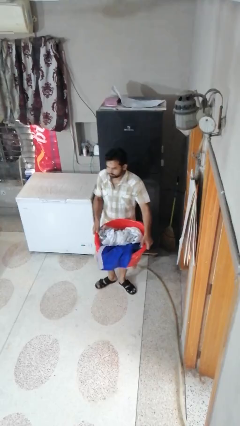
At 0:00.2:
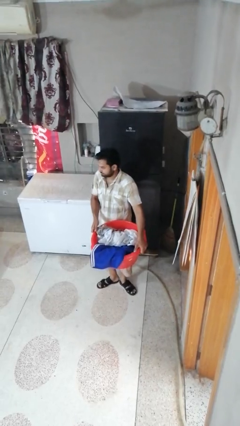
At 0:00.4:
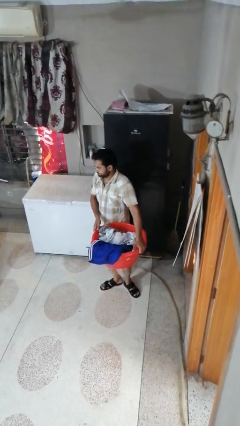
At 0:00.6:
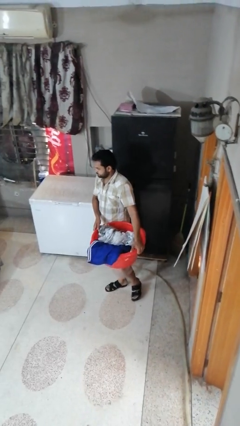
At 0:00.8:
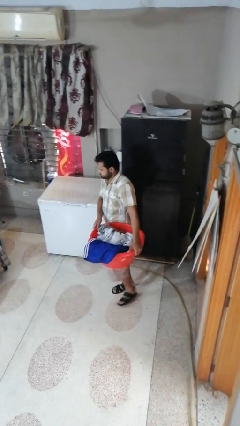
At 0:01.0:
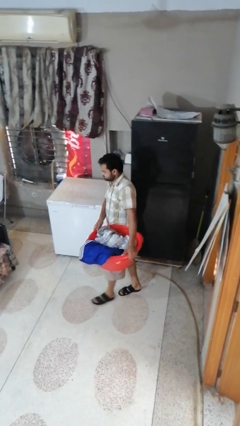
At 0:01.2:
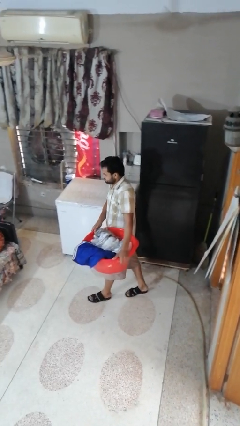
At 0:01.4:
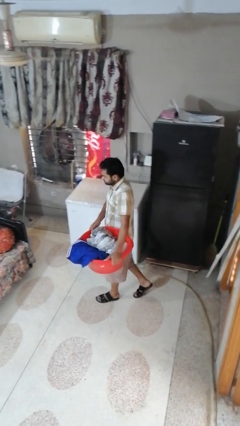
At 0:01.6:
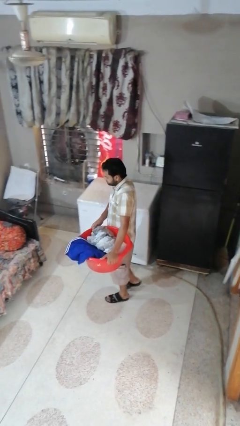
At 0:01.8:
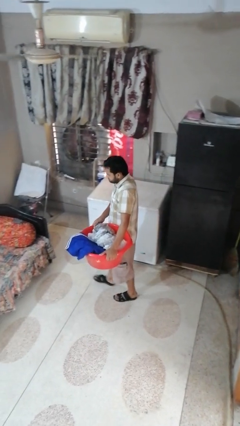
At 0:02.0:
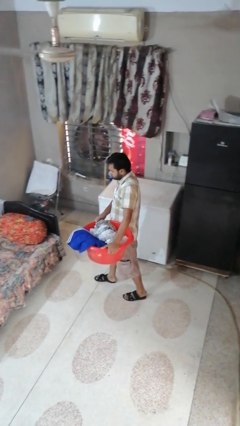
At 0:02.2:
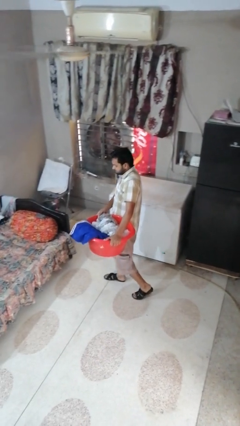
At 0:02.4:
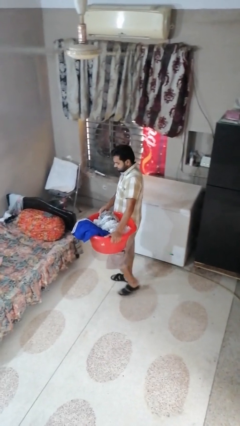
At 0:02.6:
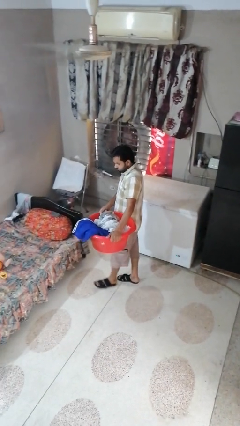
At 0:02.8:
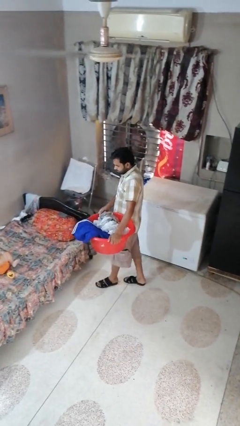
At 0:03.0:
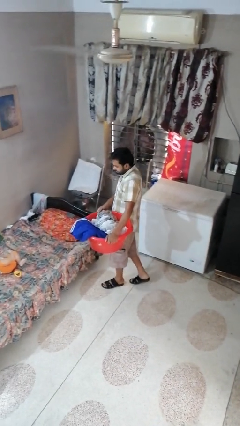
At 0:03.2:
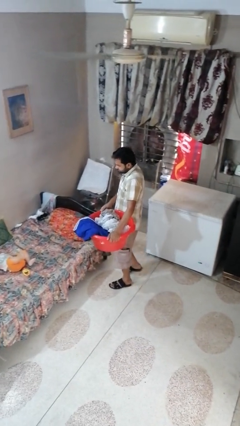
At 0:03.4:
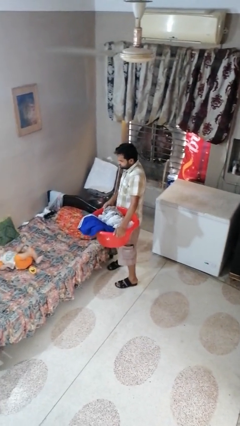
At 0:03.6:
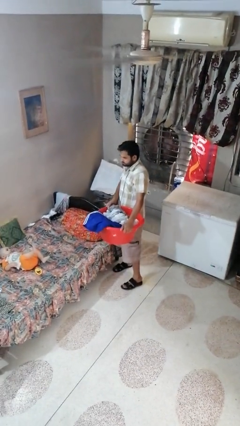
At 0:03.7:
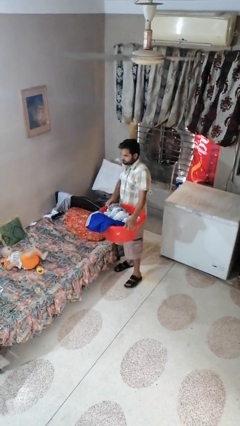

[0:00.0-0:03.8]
person carries laundry basket

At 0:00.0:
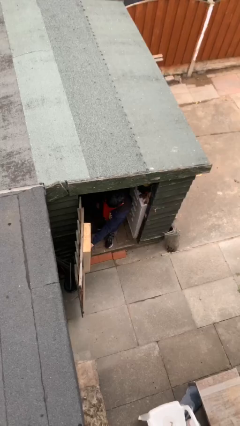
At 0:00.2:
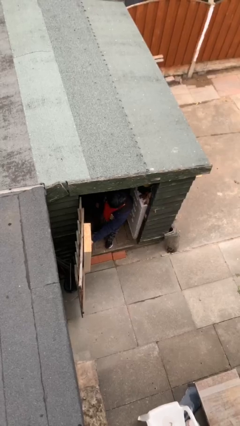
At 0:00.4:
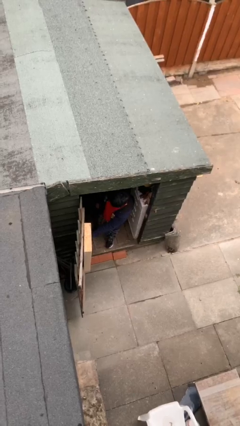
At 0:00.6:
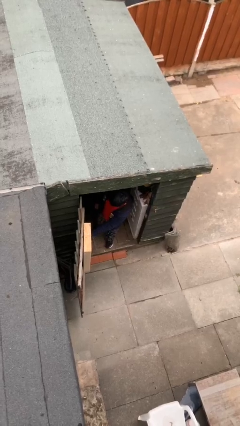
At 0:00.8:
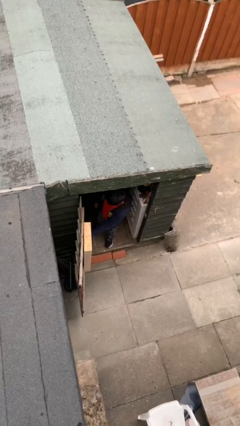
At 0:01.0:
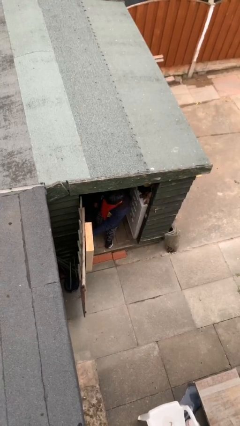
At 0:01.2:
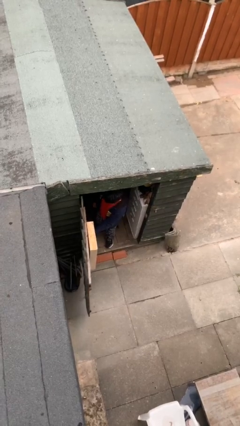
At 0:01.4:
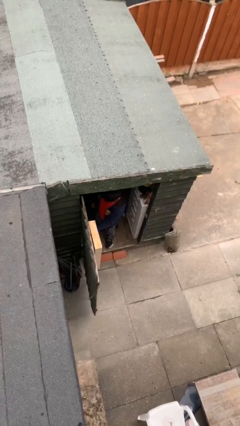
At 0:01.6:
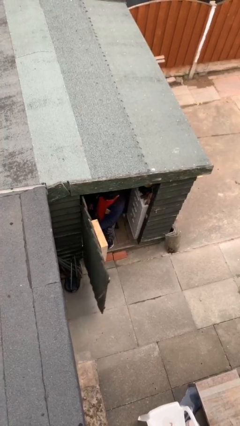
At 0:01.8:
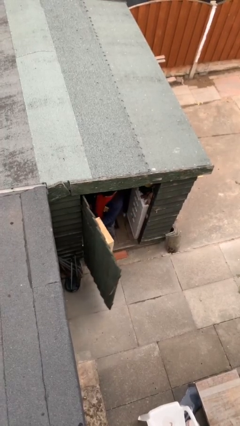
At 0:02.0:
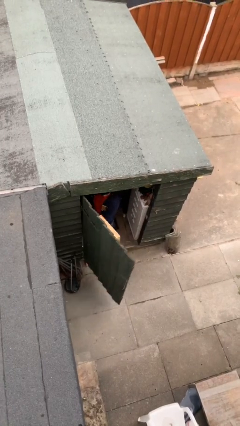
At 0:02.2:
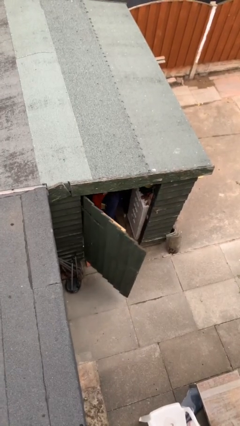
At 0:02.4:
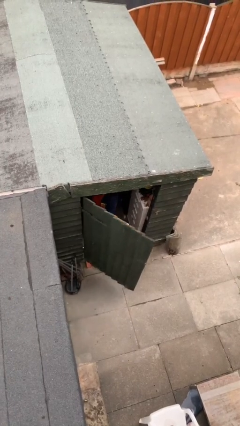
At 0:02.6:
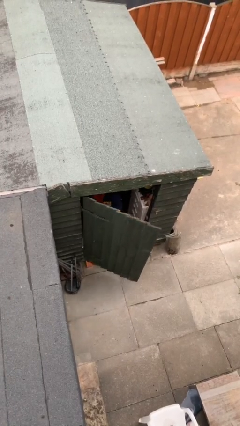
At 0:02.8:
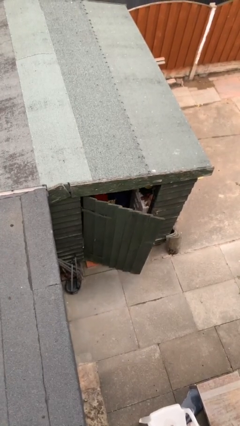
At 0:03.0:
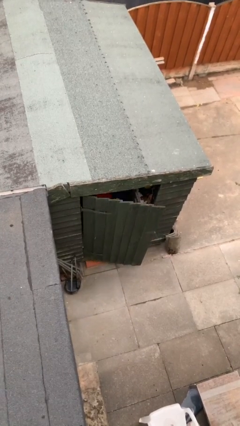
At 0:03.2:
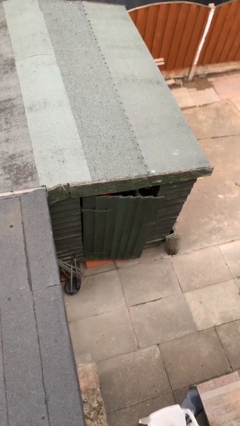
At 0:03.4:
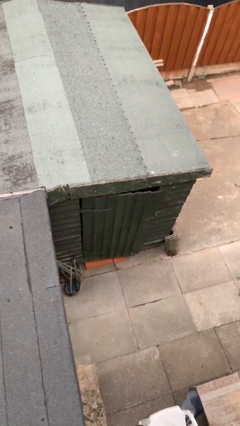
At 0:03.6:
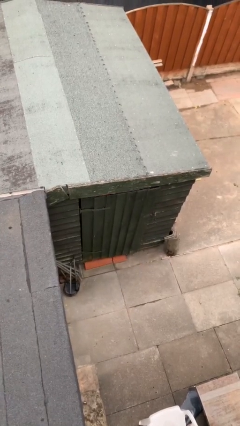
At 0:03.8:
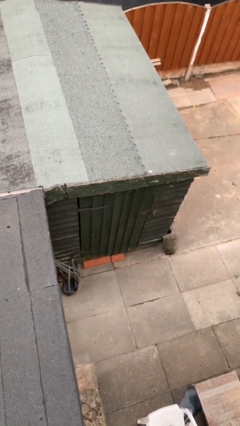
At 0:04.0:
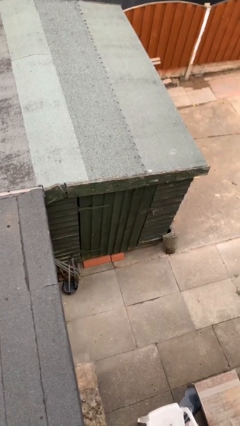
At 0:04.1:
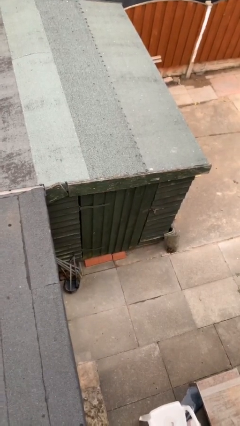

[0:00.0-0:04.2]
person closes facility door

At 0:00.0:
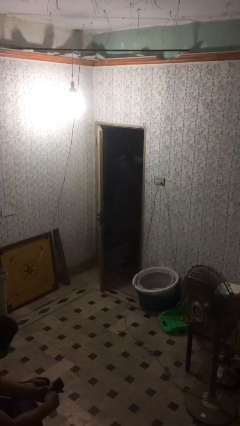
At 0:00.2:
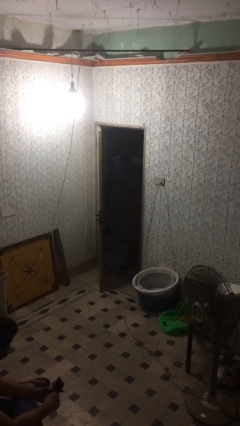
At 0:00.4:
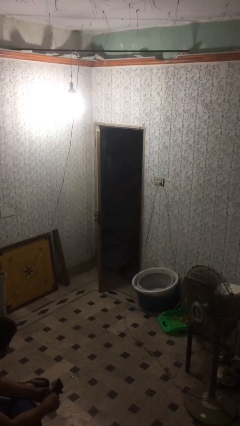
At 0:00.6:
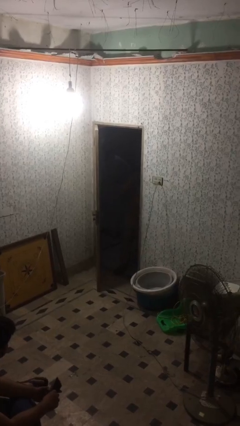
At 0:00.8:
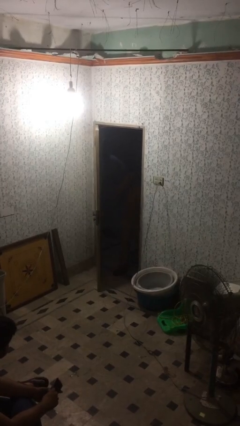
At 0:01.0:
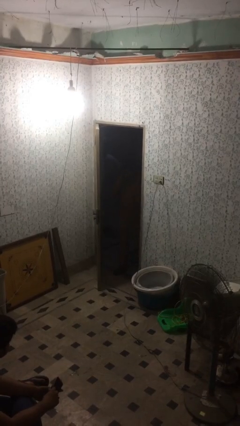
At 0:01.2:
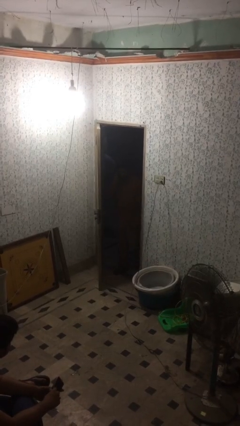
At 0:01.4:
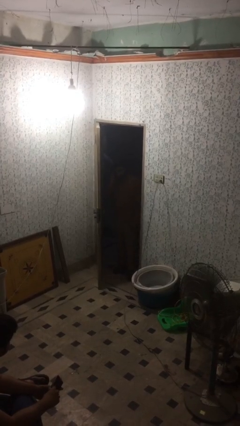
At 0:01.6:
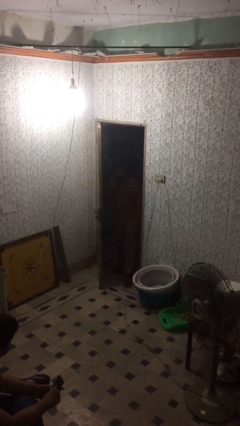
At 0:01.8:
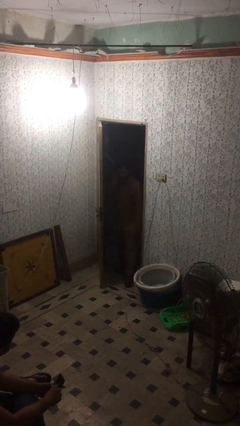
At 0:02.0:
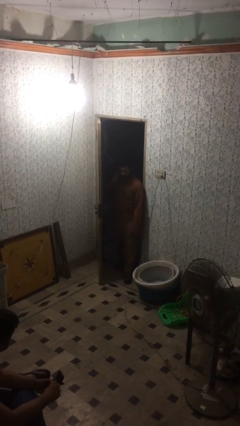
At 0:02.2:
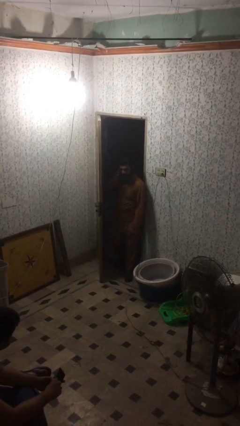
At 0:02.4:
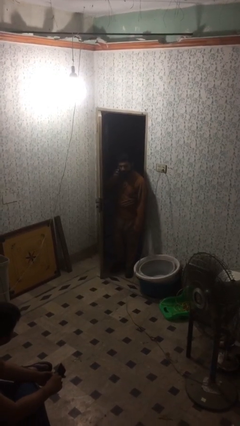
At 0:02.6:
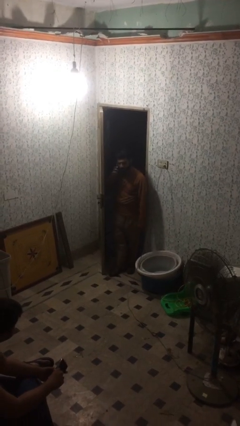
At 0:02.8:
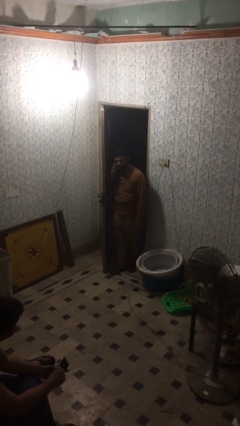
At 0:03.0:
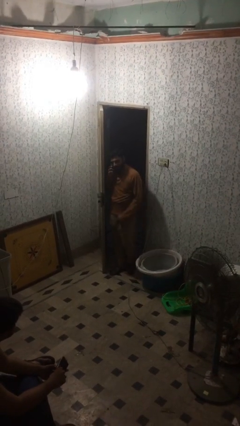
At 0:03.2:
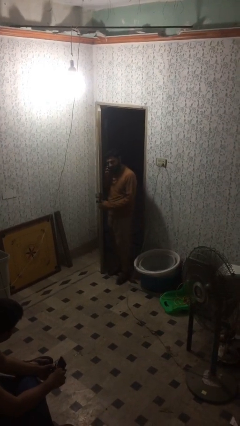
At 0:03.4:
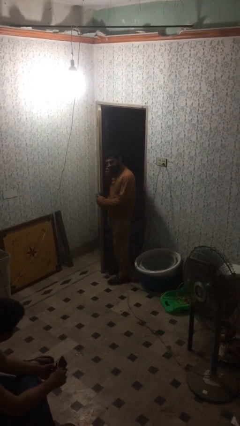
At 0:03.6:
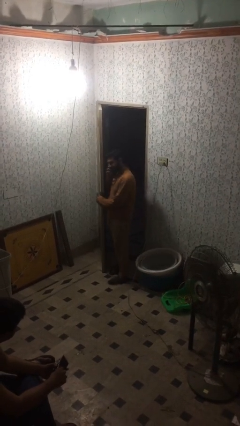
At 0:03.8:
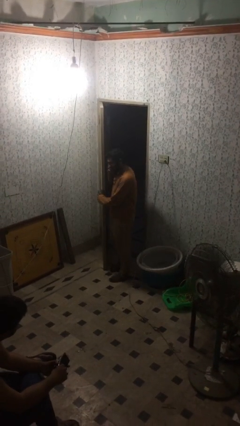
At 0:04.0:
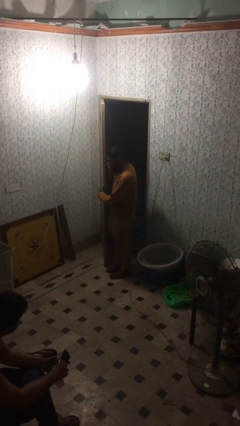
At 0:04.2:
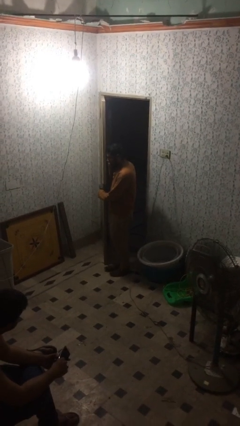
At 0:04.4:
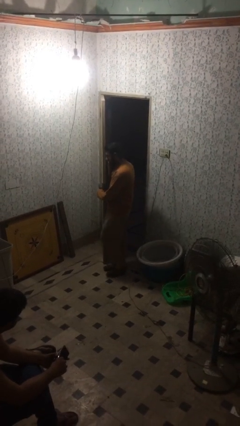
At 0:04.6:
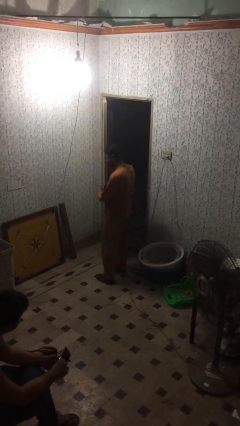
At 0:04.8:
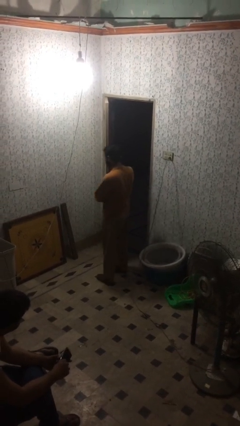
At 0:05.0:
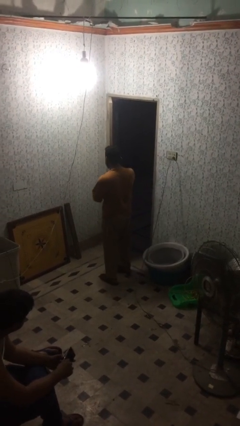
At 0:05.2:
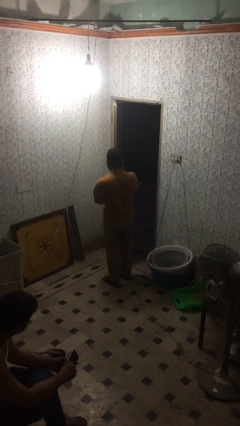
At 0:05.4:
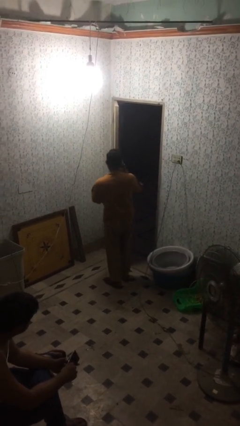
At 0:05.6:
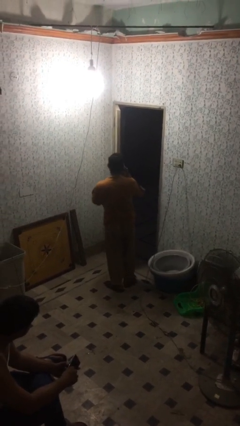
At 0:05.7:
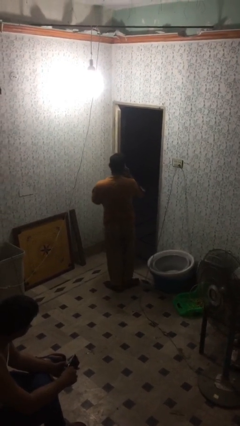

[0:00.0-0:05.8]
person enters scene through structure

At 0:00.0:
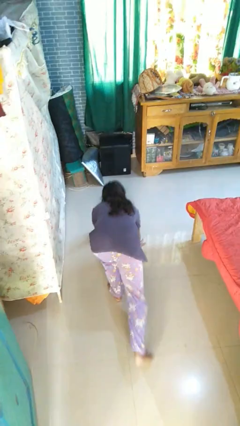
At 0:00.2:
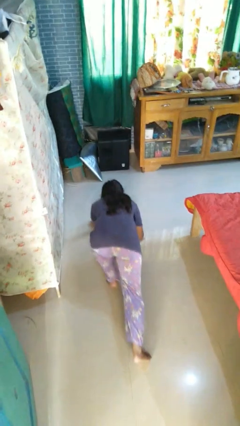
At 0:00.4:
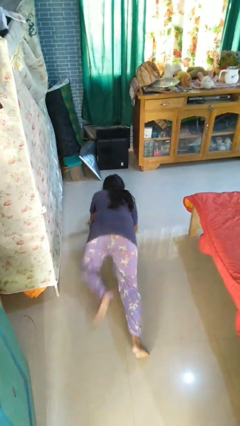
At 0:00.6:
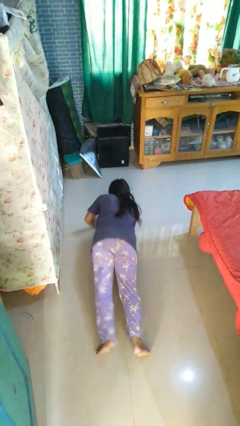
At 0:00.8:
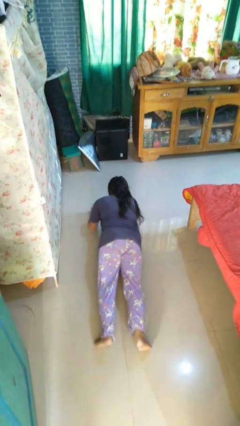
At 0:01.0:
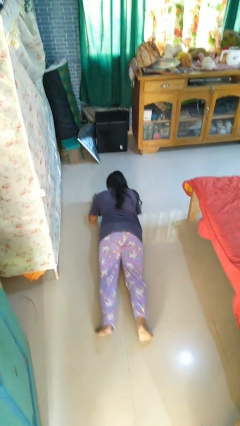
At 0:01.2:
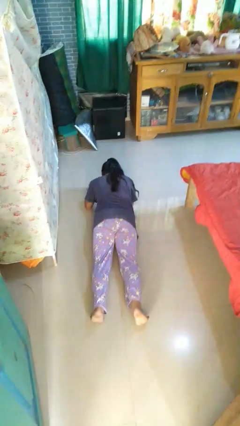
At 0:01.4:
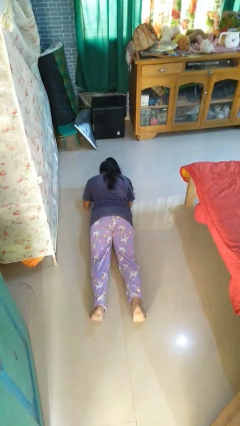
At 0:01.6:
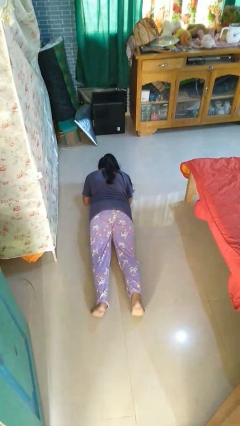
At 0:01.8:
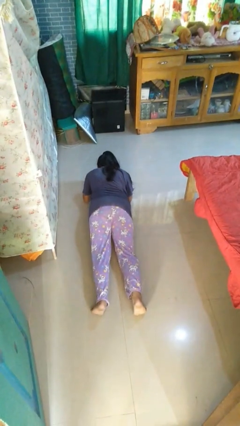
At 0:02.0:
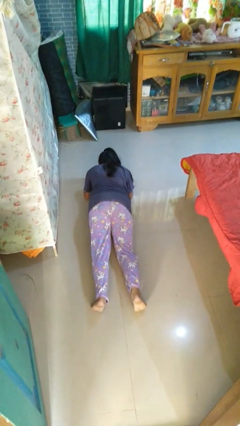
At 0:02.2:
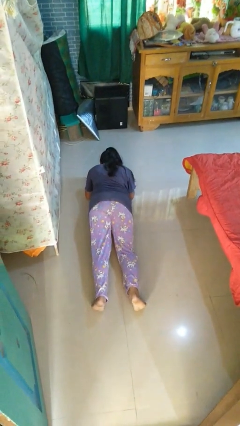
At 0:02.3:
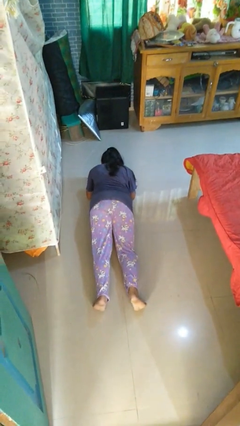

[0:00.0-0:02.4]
person exercises with plank

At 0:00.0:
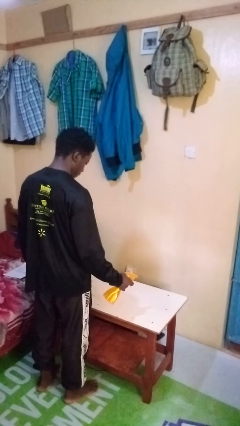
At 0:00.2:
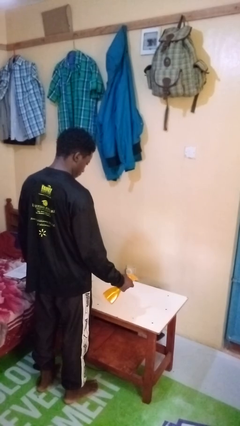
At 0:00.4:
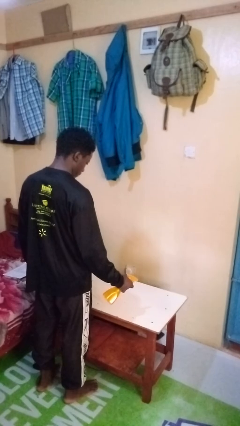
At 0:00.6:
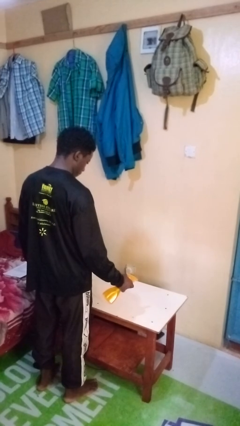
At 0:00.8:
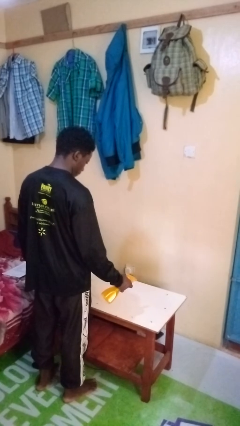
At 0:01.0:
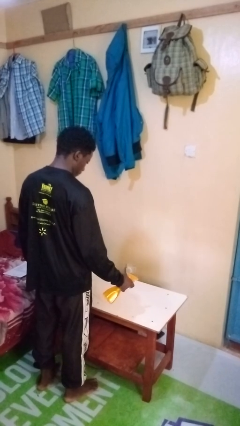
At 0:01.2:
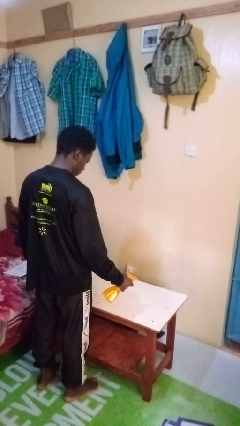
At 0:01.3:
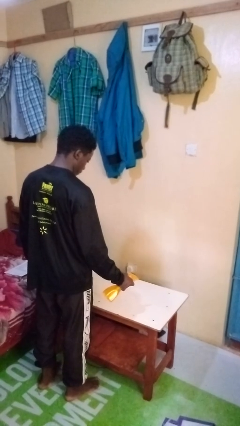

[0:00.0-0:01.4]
person sprays from bottle
